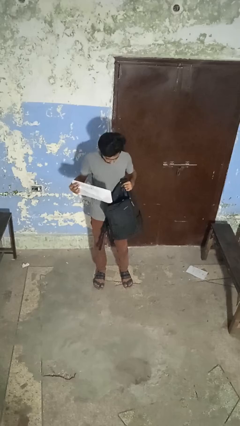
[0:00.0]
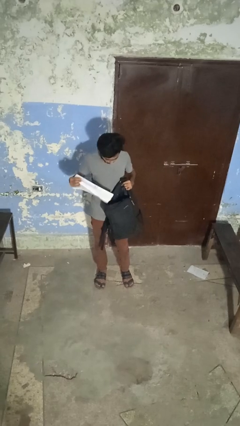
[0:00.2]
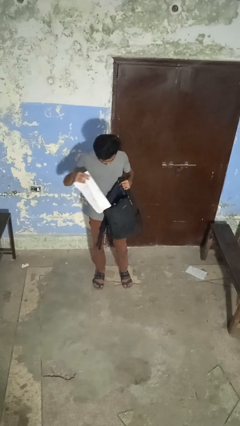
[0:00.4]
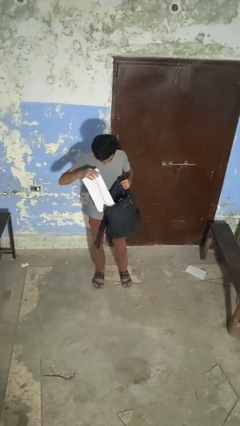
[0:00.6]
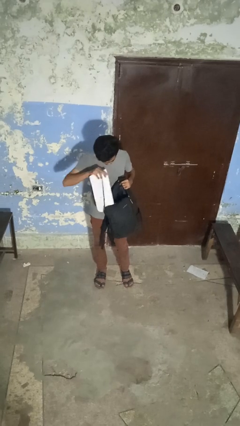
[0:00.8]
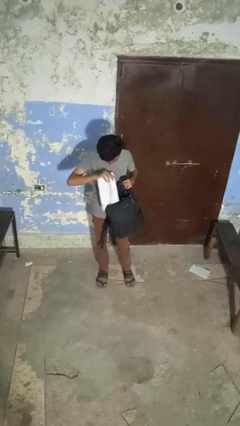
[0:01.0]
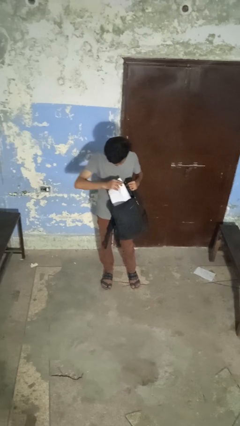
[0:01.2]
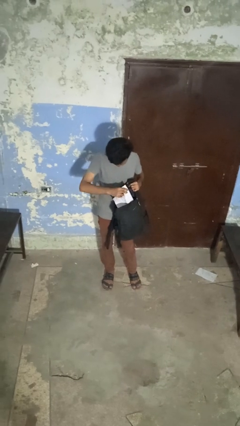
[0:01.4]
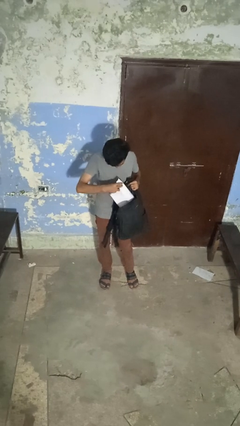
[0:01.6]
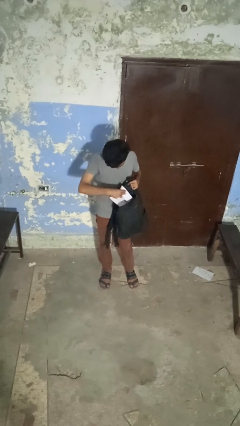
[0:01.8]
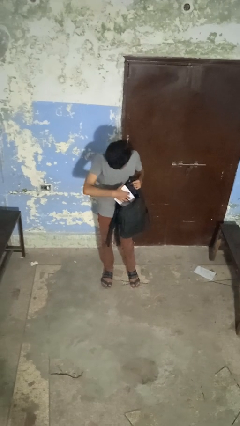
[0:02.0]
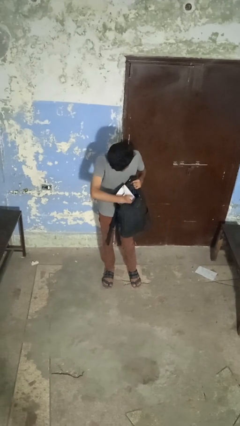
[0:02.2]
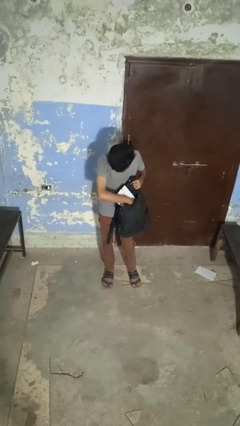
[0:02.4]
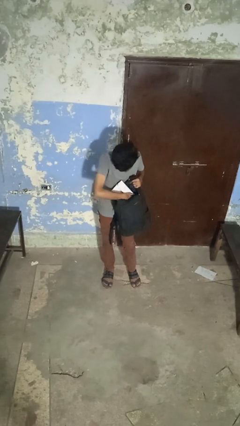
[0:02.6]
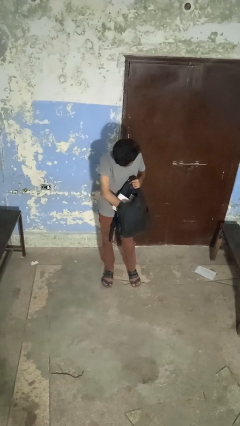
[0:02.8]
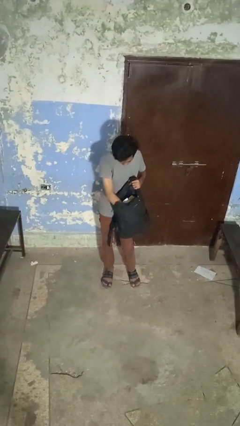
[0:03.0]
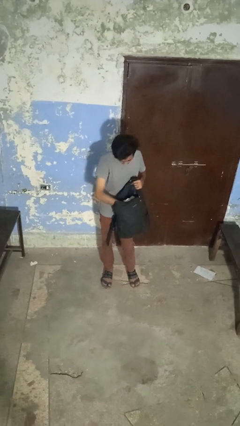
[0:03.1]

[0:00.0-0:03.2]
person puts object into backpack

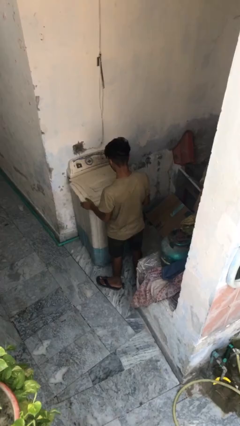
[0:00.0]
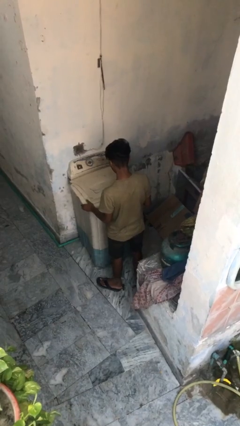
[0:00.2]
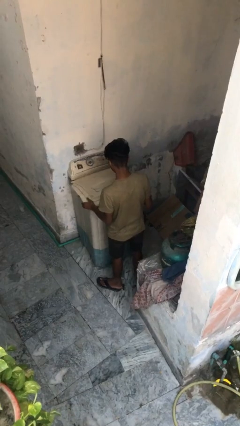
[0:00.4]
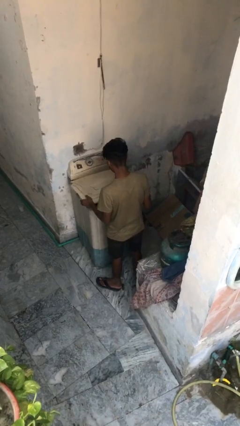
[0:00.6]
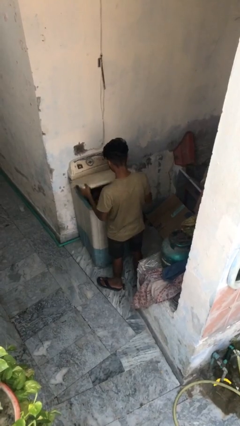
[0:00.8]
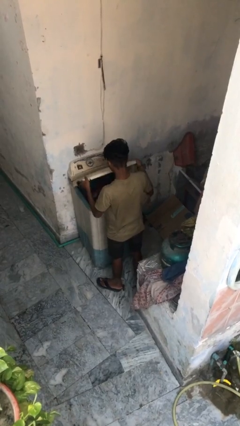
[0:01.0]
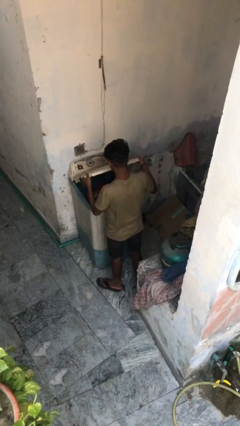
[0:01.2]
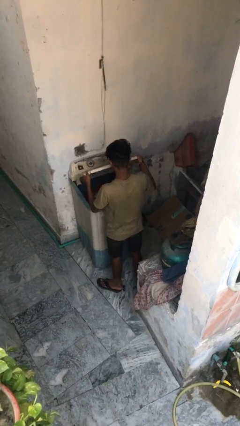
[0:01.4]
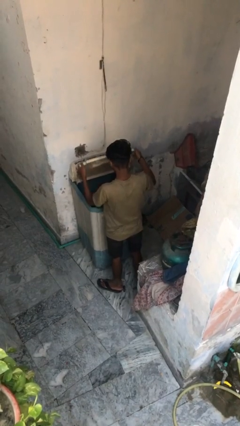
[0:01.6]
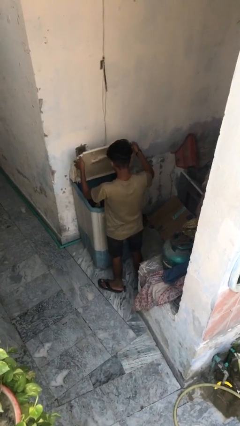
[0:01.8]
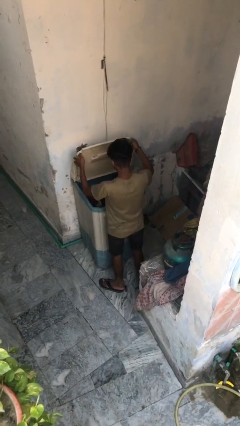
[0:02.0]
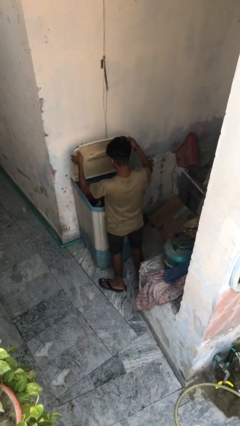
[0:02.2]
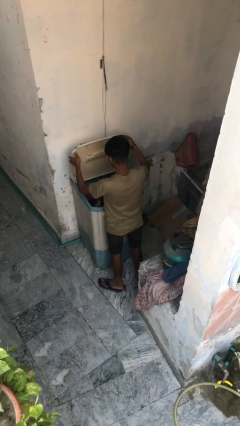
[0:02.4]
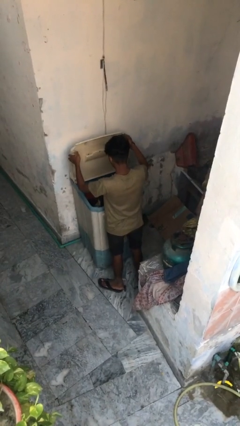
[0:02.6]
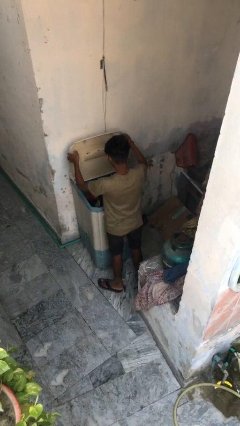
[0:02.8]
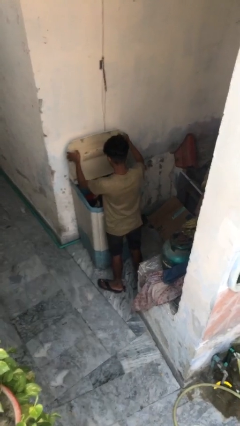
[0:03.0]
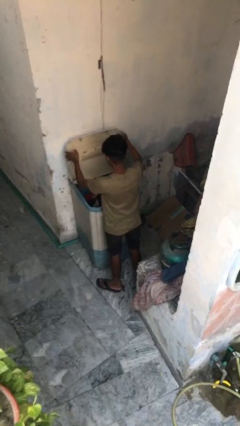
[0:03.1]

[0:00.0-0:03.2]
person opens clothes washer

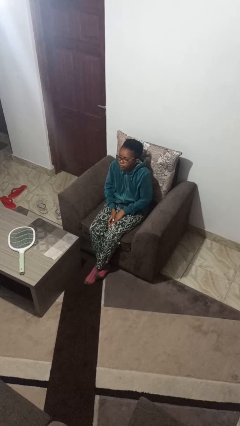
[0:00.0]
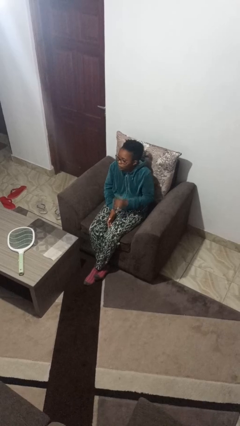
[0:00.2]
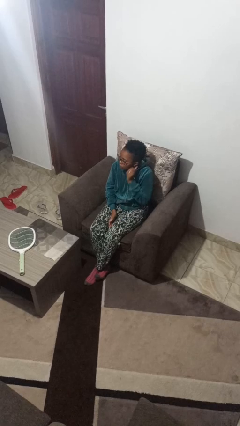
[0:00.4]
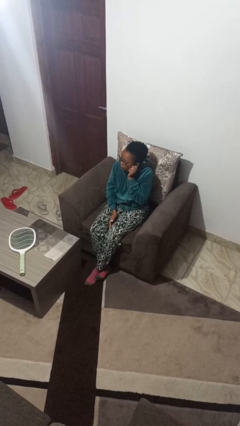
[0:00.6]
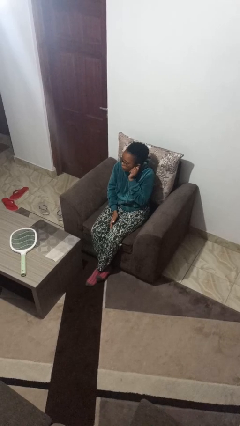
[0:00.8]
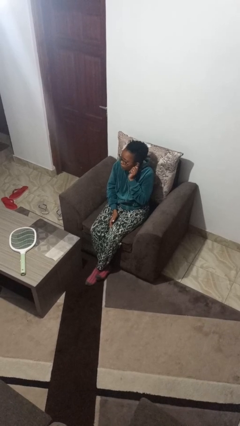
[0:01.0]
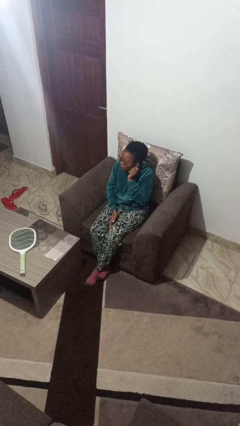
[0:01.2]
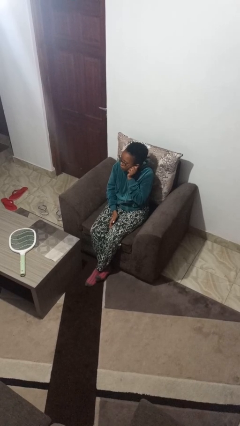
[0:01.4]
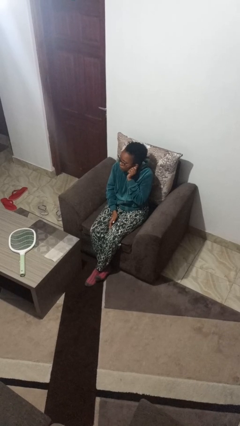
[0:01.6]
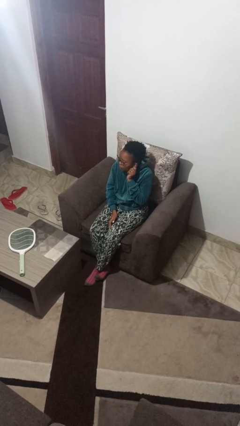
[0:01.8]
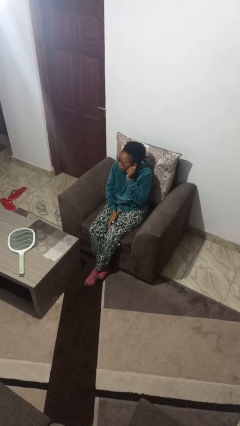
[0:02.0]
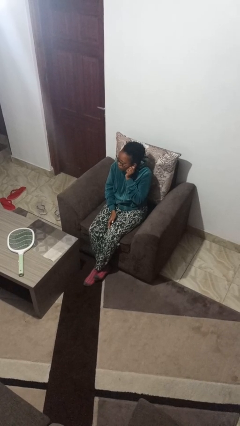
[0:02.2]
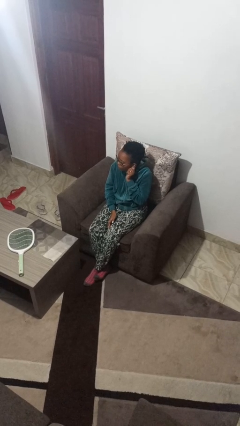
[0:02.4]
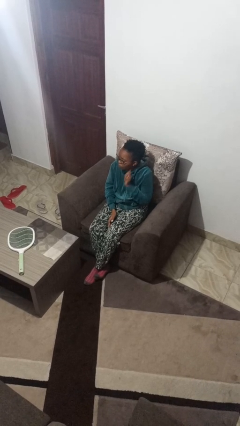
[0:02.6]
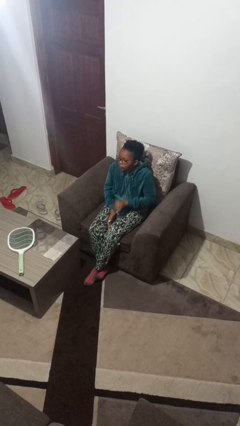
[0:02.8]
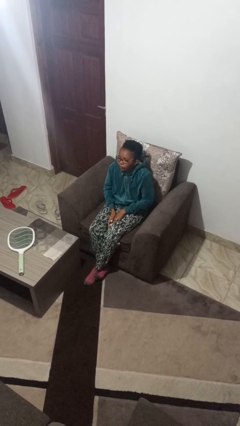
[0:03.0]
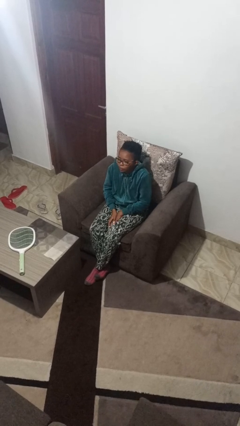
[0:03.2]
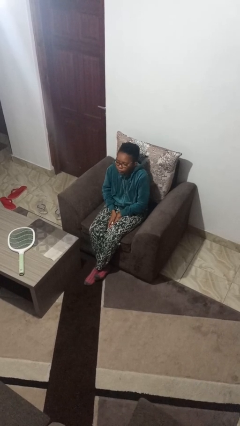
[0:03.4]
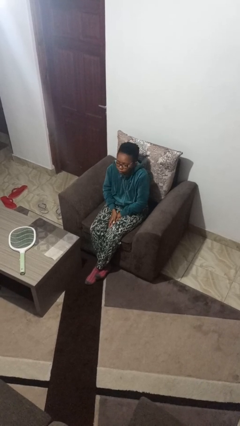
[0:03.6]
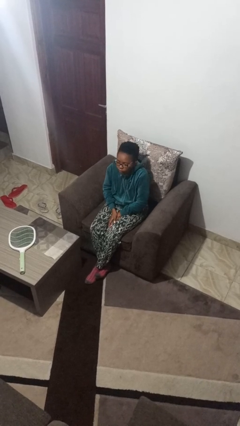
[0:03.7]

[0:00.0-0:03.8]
person touches earlobe

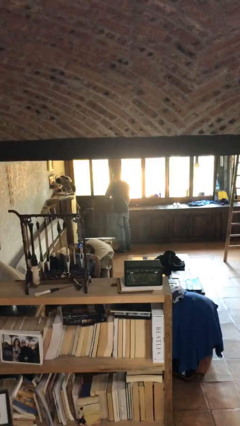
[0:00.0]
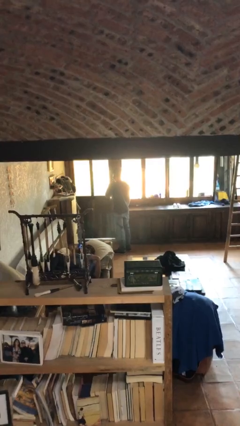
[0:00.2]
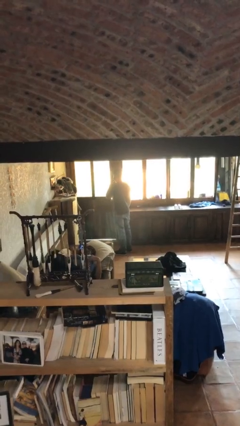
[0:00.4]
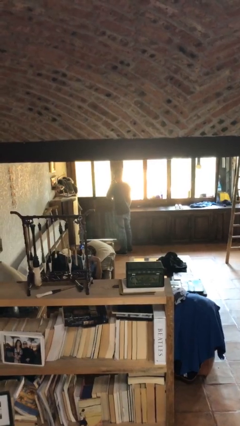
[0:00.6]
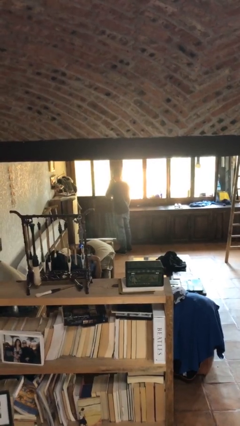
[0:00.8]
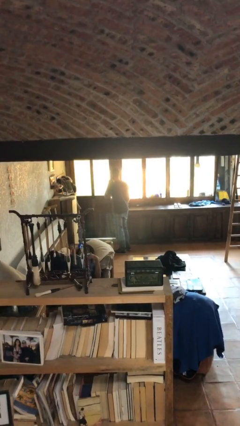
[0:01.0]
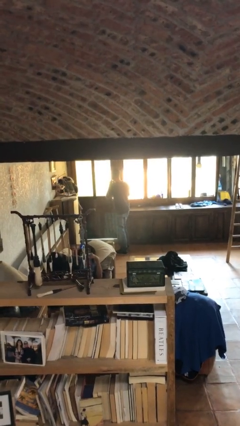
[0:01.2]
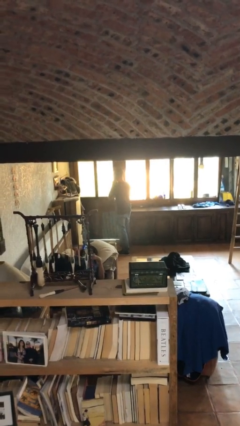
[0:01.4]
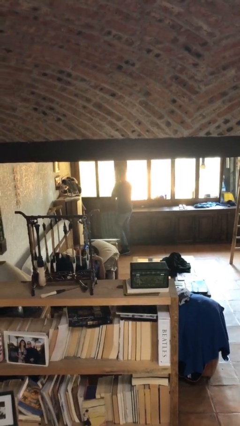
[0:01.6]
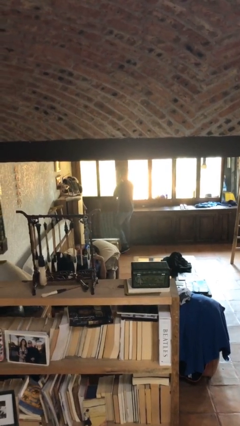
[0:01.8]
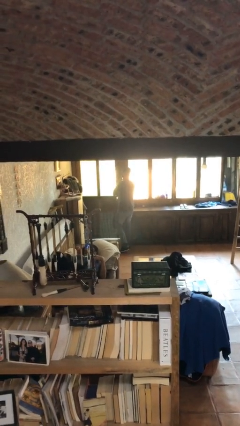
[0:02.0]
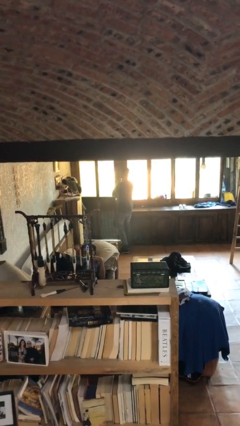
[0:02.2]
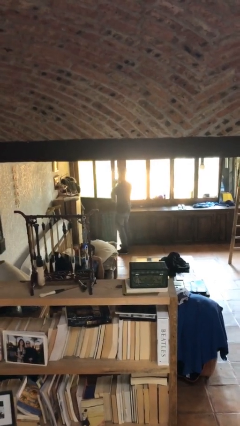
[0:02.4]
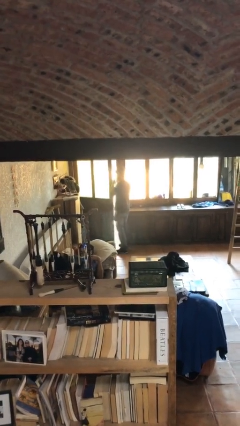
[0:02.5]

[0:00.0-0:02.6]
person opens facility door

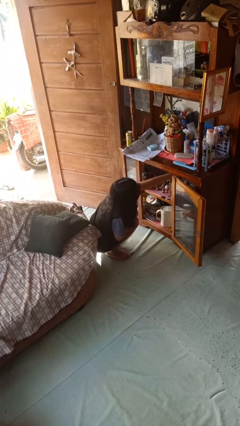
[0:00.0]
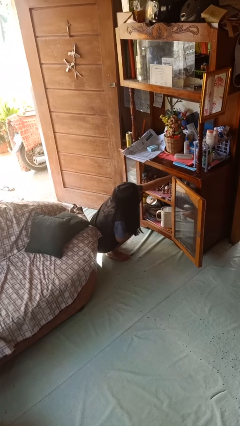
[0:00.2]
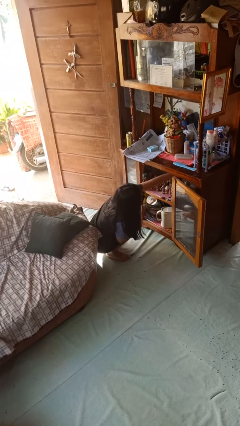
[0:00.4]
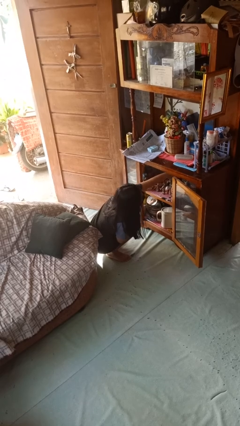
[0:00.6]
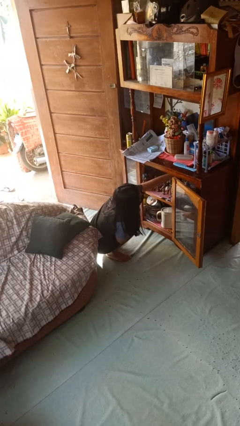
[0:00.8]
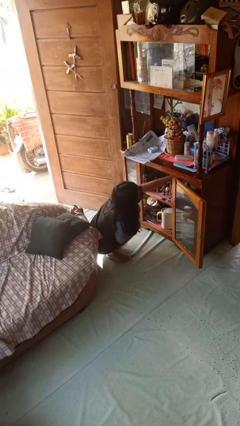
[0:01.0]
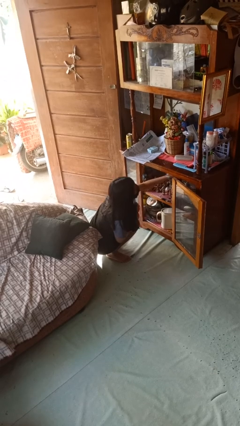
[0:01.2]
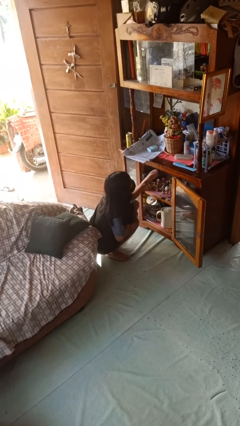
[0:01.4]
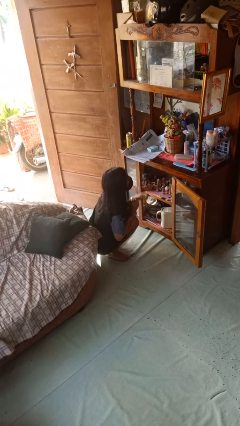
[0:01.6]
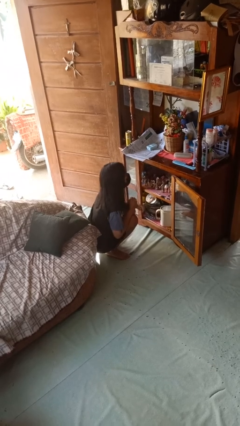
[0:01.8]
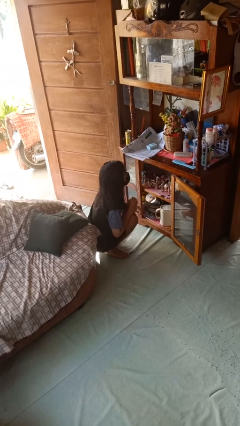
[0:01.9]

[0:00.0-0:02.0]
person searches in cabinet

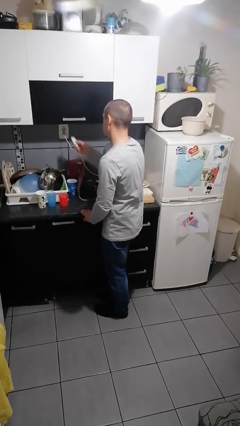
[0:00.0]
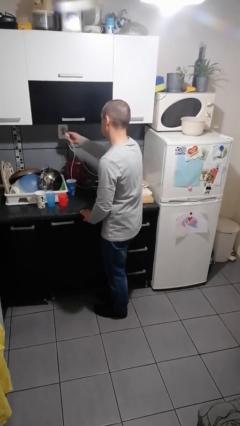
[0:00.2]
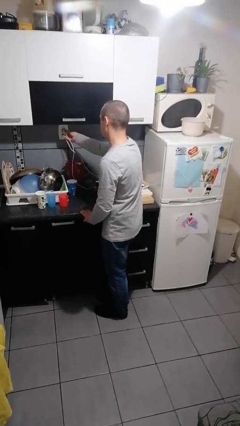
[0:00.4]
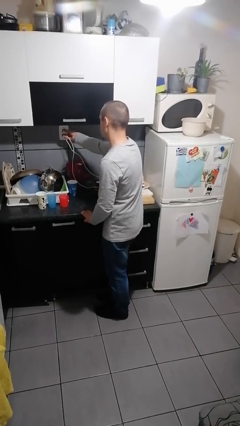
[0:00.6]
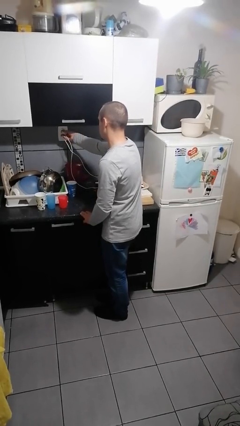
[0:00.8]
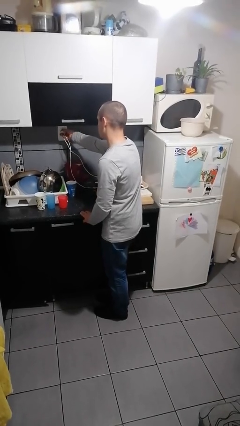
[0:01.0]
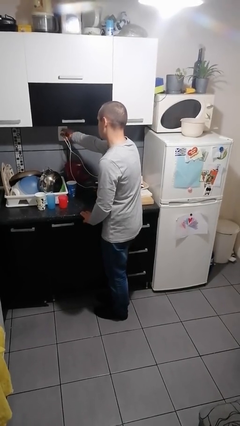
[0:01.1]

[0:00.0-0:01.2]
person plugs into electrical socket

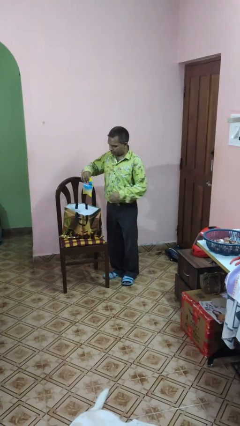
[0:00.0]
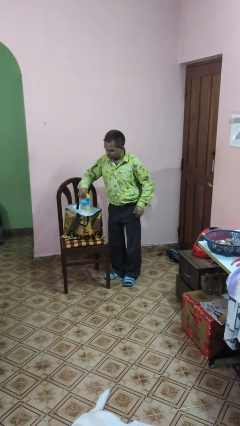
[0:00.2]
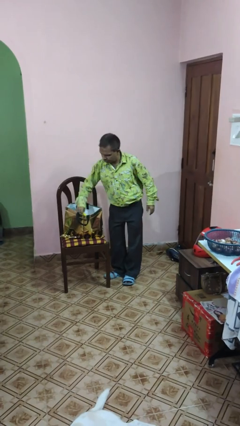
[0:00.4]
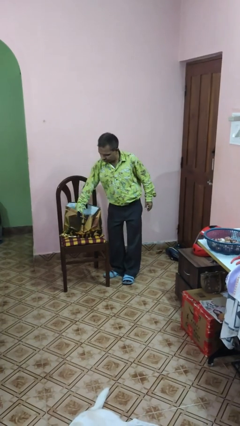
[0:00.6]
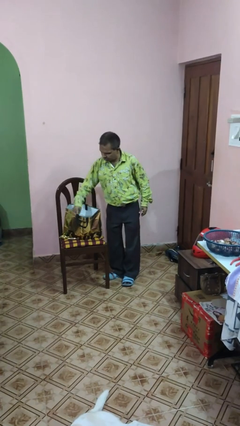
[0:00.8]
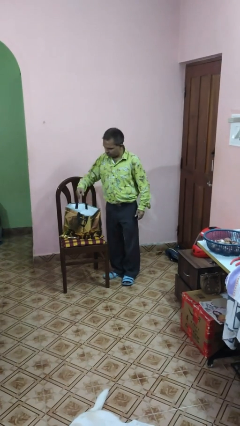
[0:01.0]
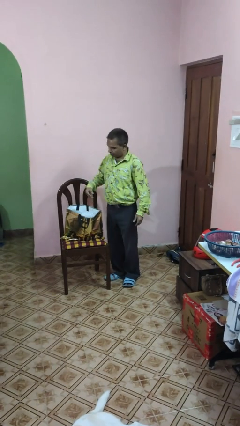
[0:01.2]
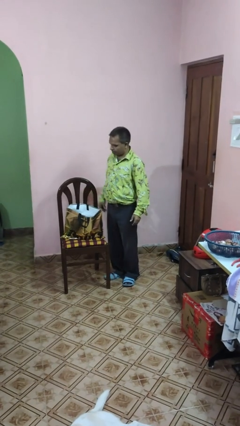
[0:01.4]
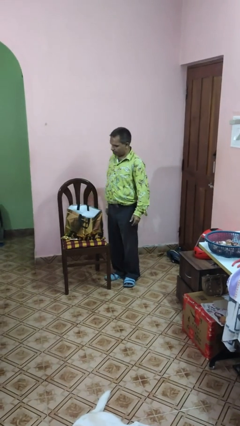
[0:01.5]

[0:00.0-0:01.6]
person puts object into bag
